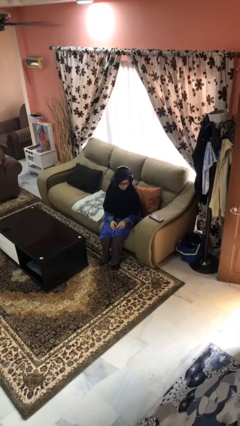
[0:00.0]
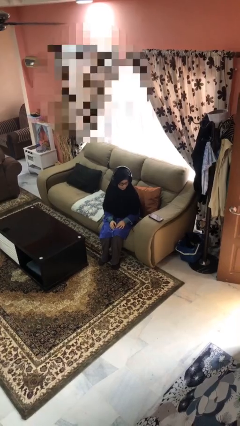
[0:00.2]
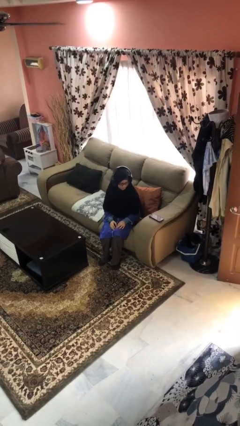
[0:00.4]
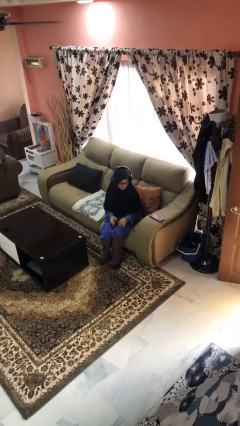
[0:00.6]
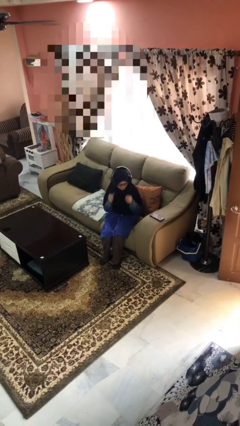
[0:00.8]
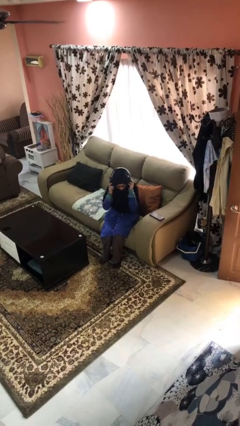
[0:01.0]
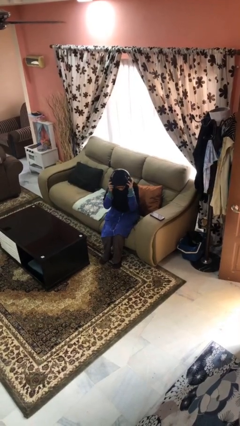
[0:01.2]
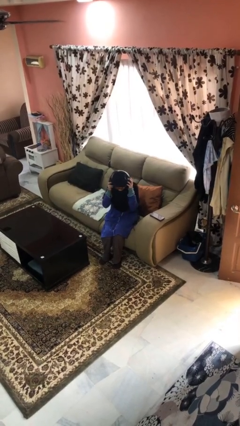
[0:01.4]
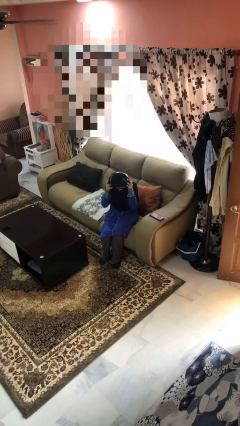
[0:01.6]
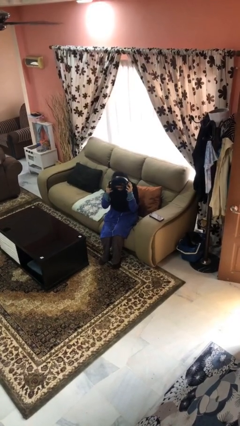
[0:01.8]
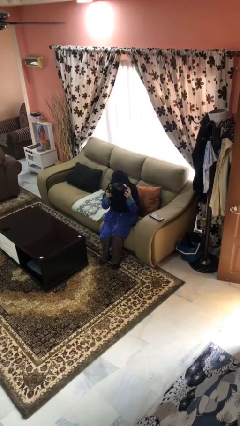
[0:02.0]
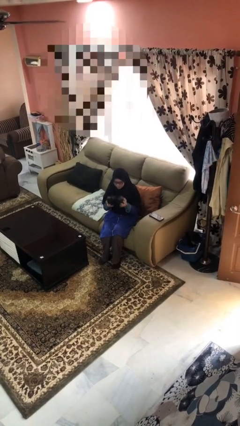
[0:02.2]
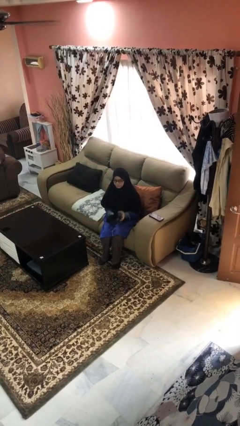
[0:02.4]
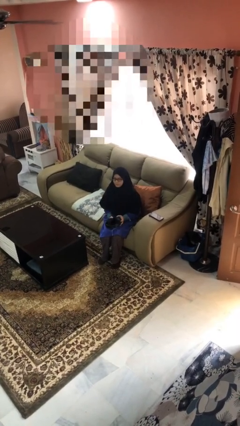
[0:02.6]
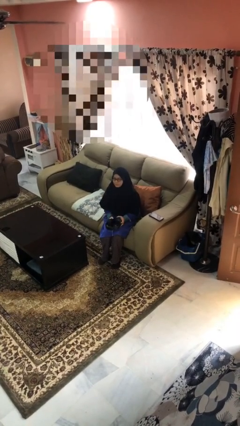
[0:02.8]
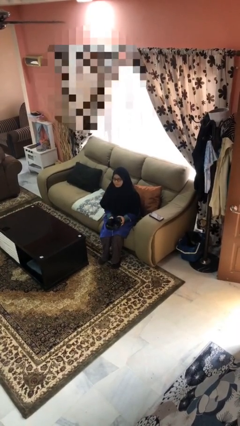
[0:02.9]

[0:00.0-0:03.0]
person takes off headphones

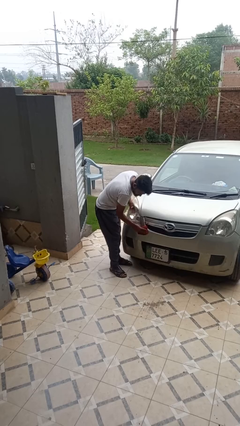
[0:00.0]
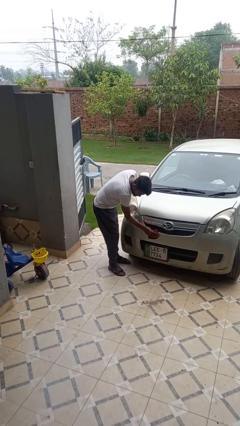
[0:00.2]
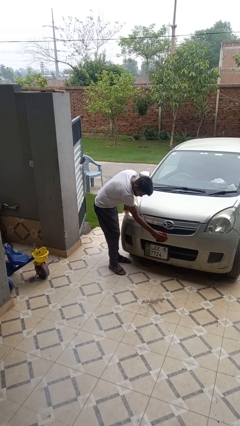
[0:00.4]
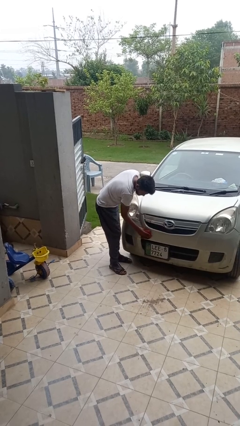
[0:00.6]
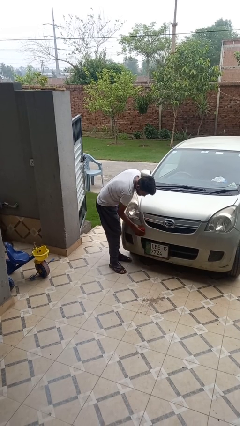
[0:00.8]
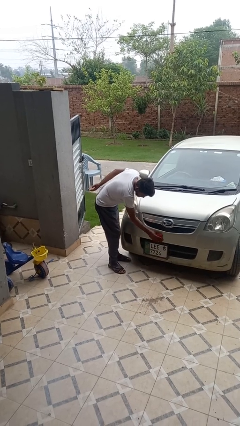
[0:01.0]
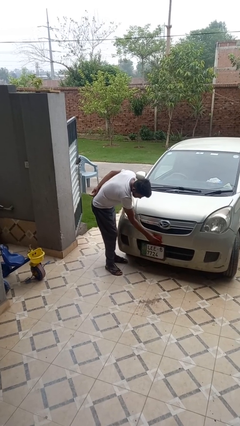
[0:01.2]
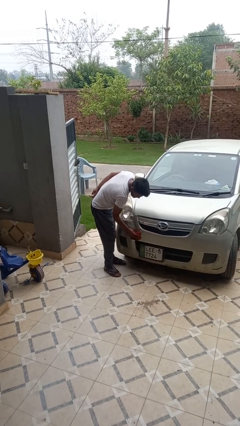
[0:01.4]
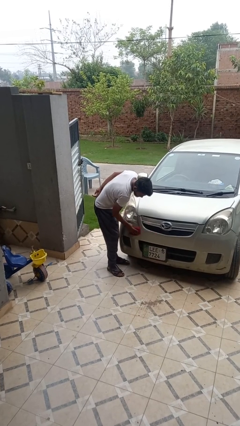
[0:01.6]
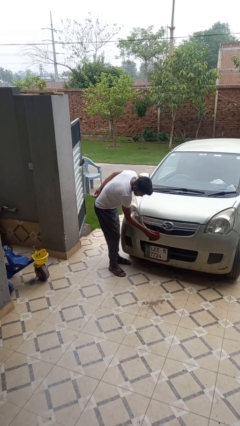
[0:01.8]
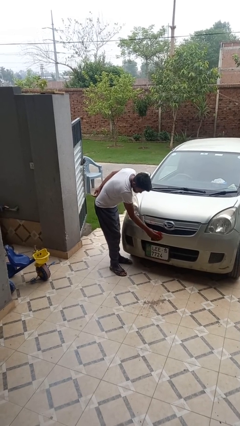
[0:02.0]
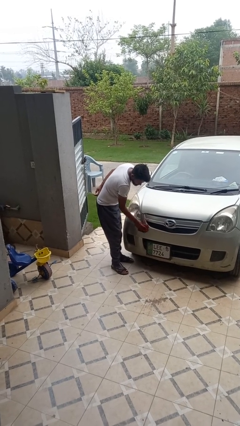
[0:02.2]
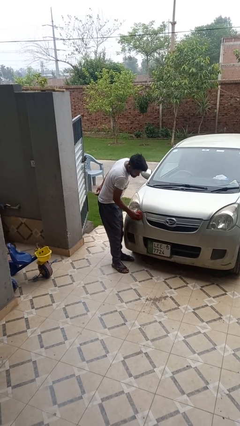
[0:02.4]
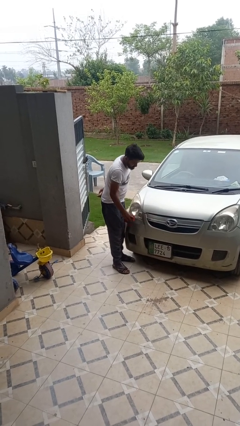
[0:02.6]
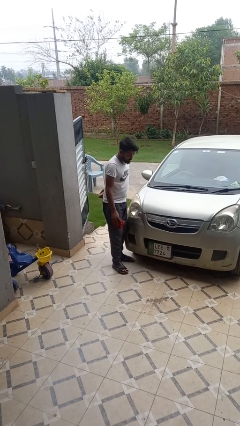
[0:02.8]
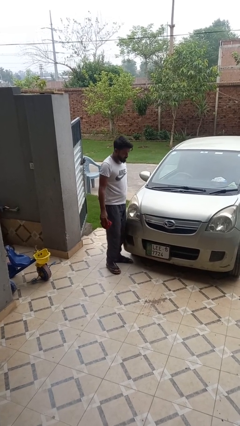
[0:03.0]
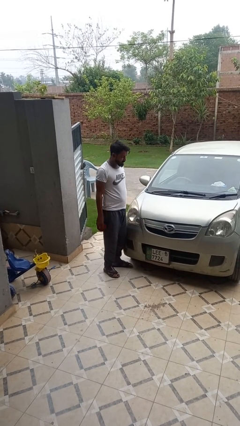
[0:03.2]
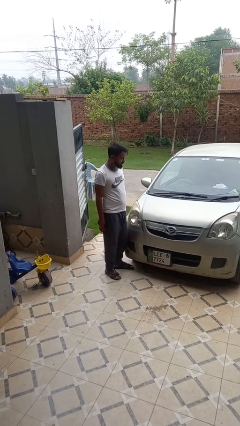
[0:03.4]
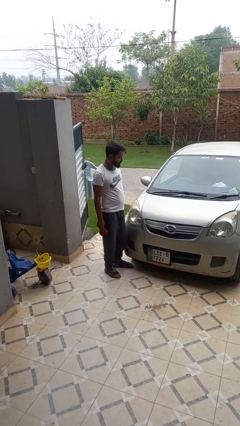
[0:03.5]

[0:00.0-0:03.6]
person polishes car with rag

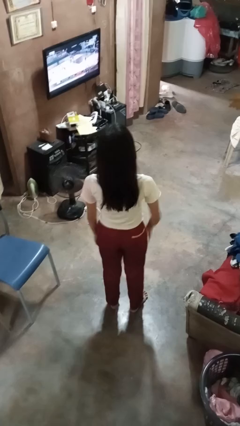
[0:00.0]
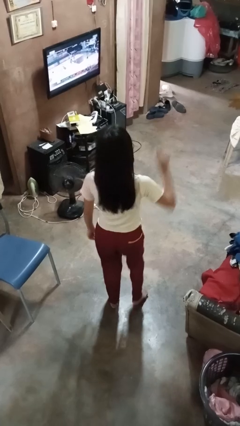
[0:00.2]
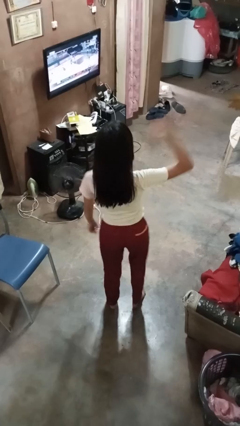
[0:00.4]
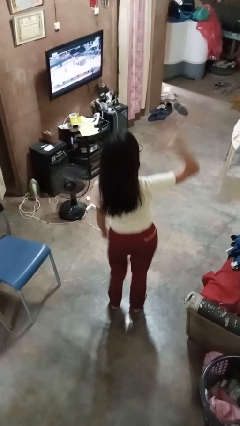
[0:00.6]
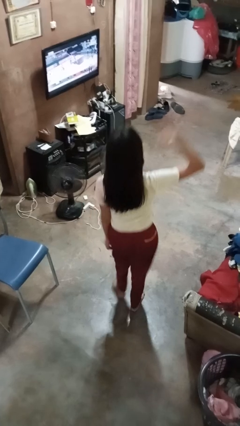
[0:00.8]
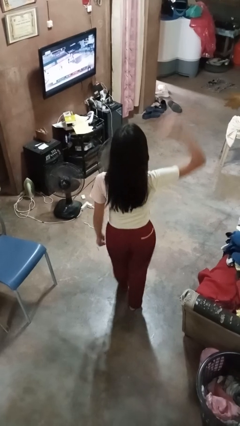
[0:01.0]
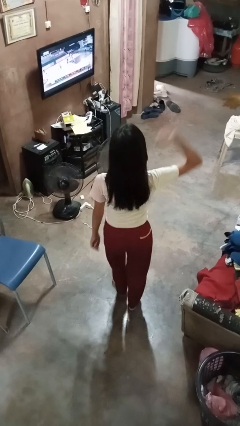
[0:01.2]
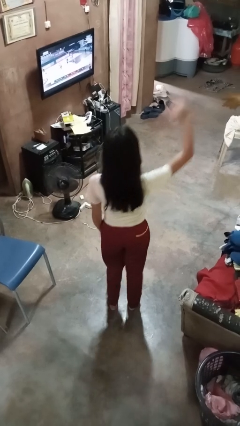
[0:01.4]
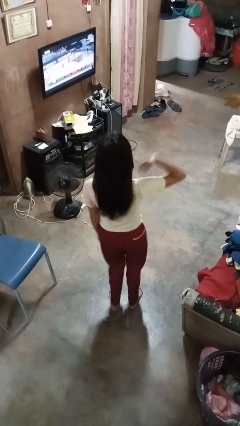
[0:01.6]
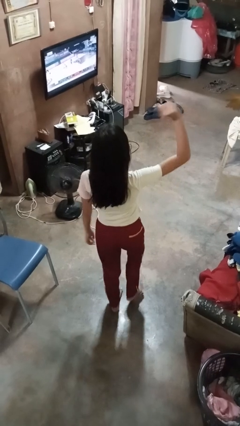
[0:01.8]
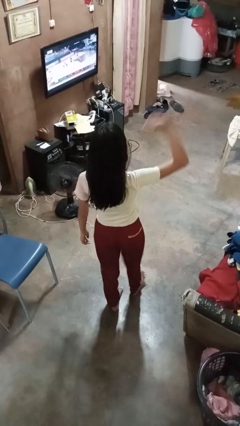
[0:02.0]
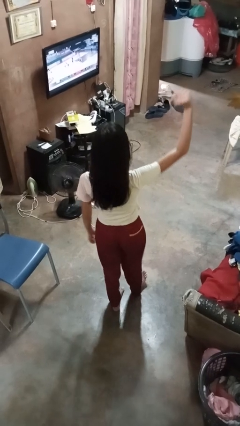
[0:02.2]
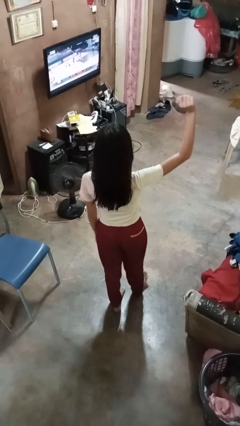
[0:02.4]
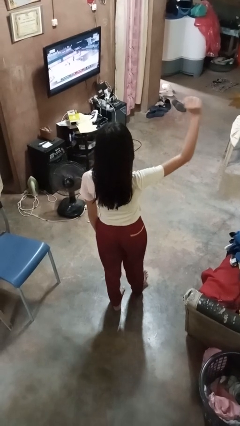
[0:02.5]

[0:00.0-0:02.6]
person dances in place

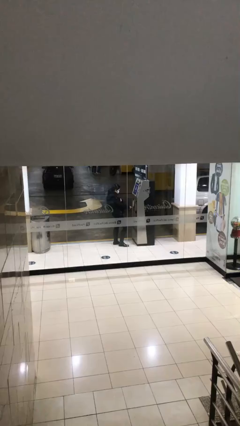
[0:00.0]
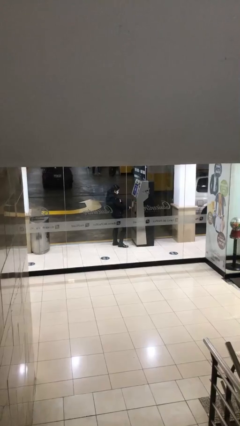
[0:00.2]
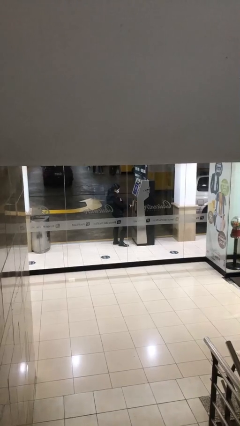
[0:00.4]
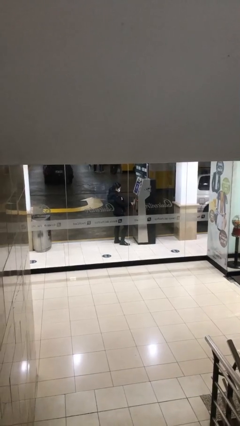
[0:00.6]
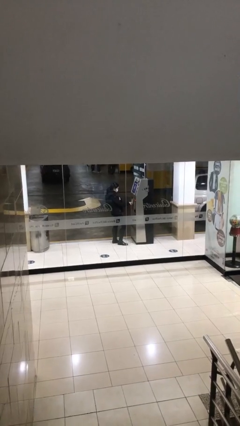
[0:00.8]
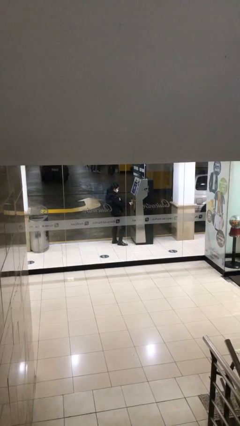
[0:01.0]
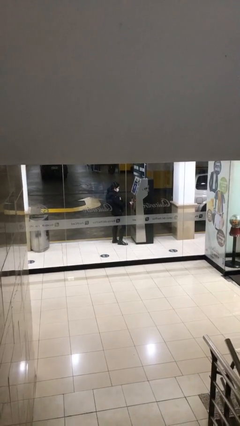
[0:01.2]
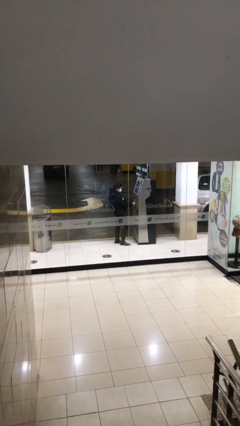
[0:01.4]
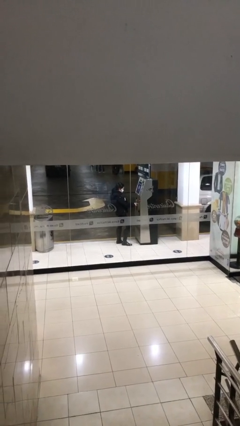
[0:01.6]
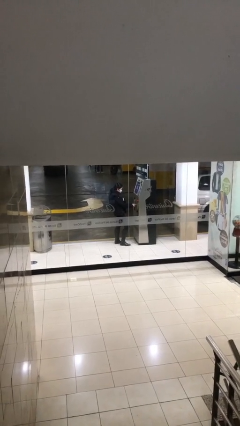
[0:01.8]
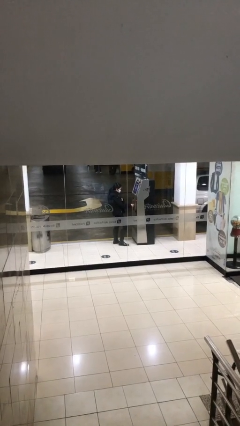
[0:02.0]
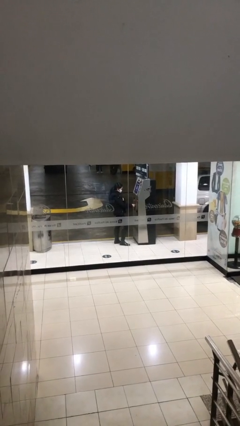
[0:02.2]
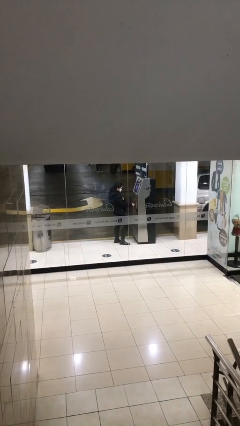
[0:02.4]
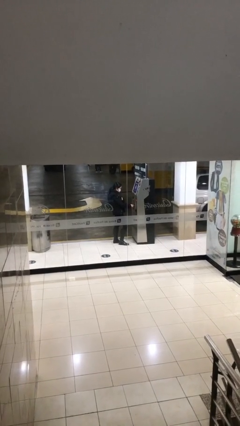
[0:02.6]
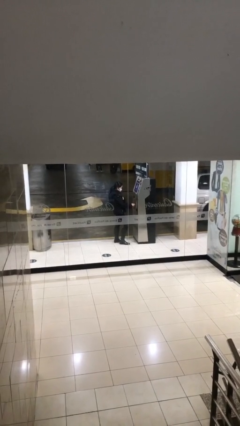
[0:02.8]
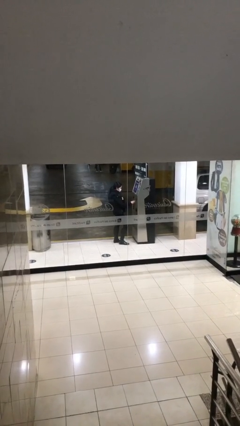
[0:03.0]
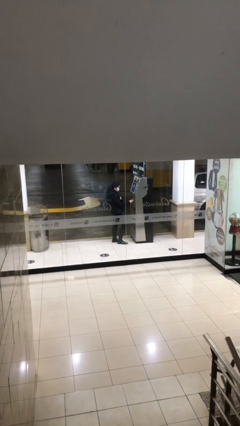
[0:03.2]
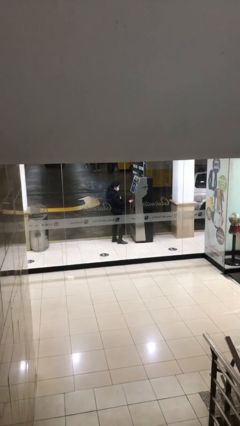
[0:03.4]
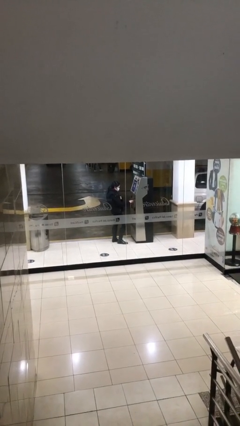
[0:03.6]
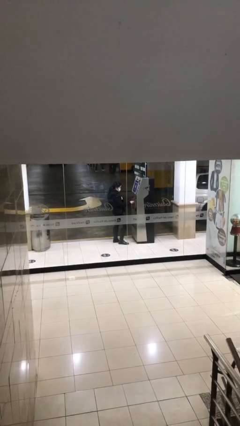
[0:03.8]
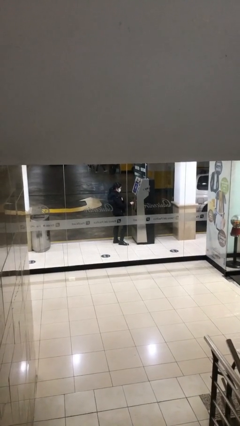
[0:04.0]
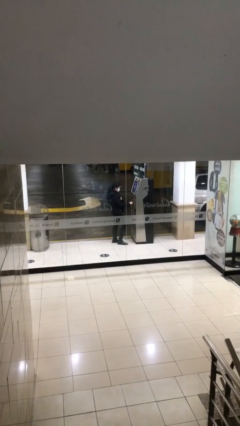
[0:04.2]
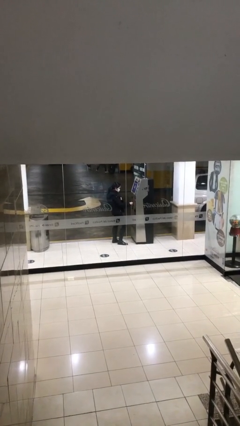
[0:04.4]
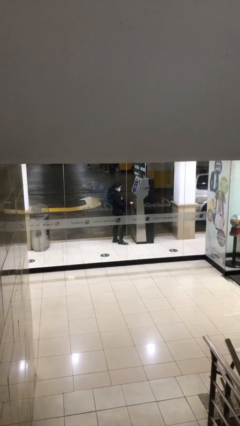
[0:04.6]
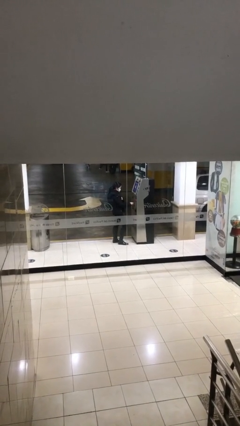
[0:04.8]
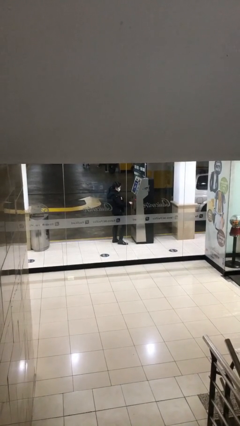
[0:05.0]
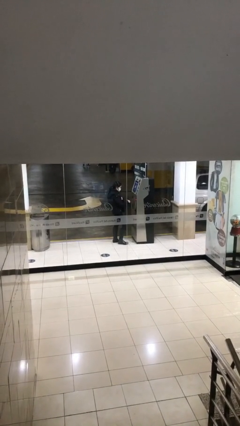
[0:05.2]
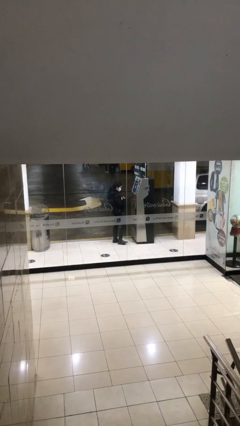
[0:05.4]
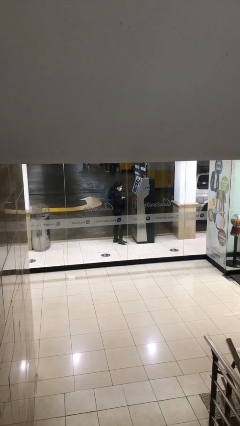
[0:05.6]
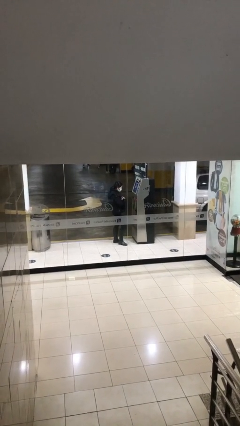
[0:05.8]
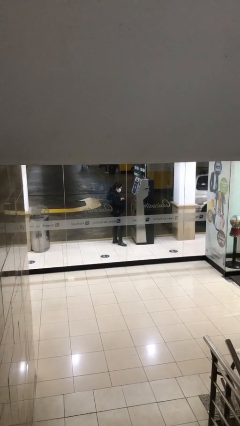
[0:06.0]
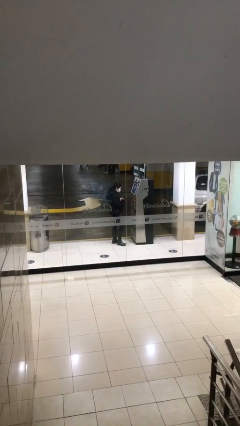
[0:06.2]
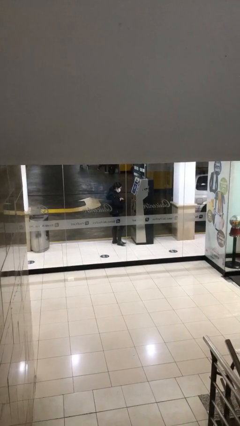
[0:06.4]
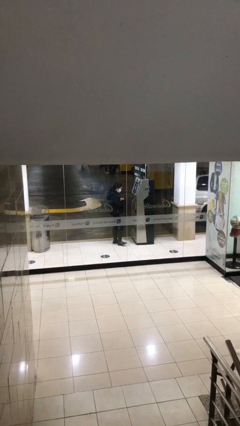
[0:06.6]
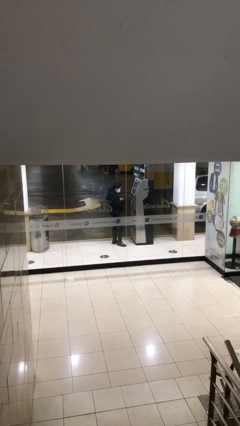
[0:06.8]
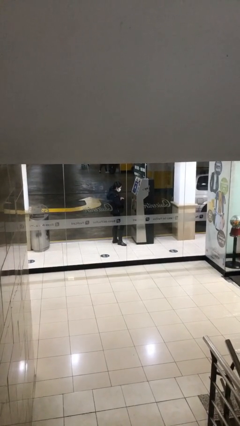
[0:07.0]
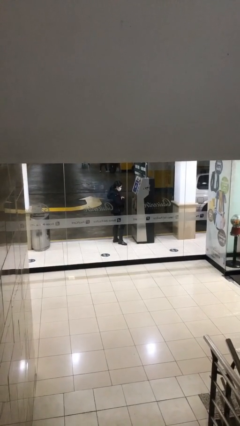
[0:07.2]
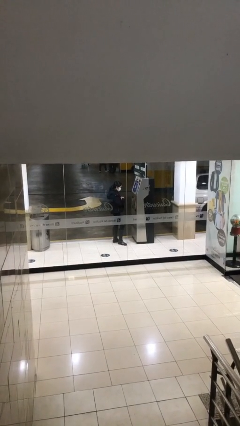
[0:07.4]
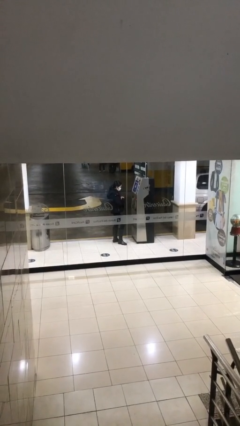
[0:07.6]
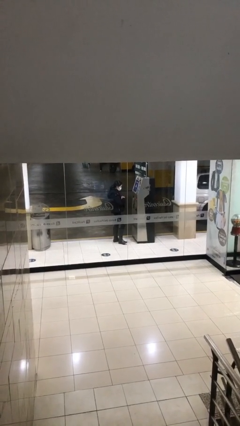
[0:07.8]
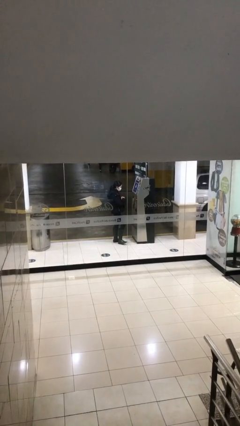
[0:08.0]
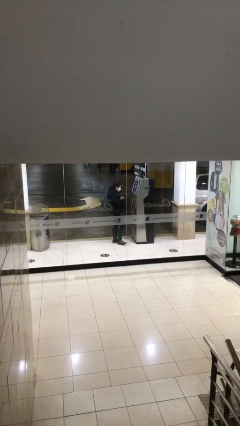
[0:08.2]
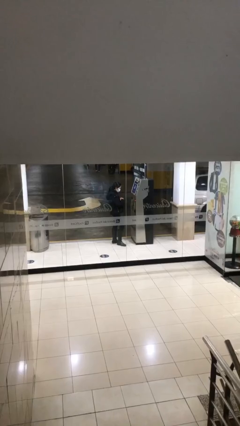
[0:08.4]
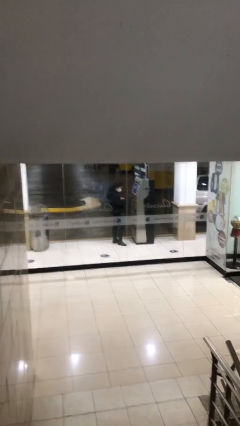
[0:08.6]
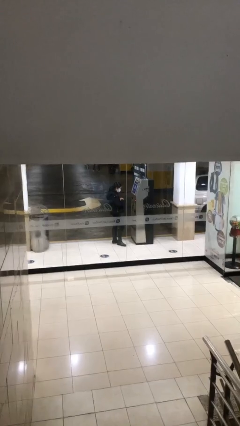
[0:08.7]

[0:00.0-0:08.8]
person purchases from machine
